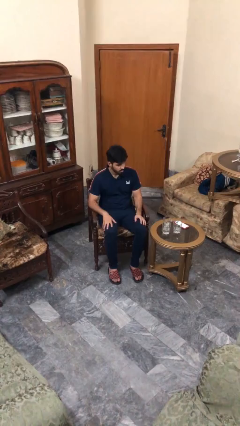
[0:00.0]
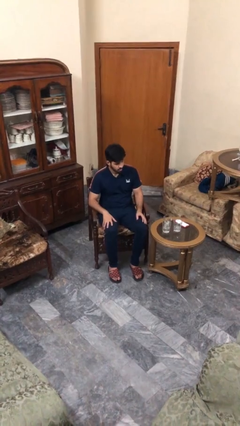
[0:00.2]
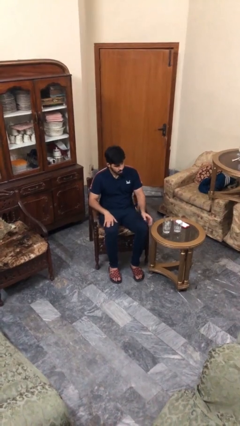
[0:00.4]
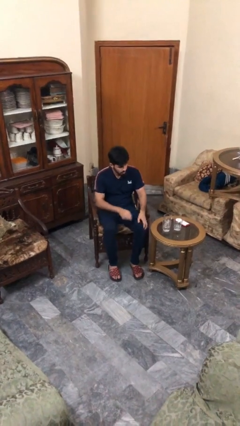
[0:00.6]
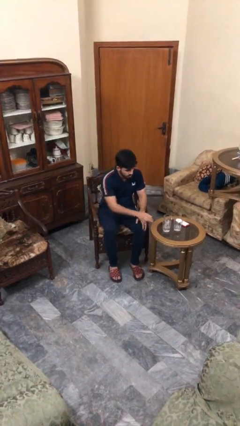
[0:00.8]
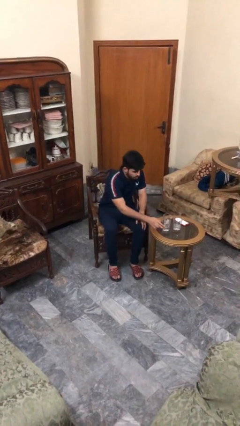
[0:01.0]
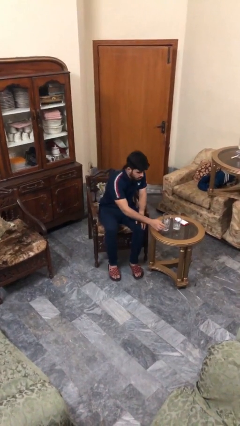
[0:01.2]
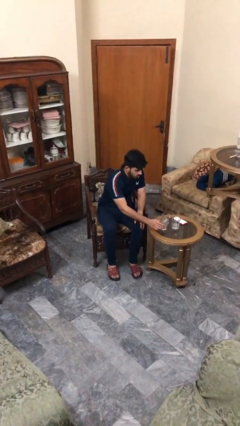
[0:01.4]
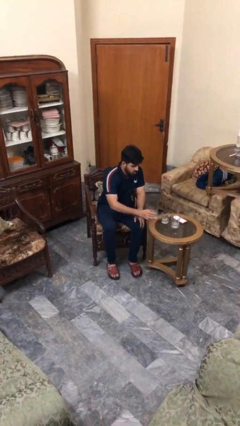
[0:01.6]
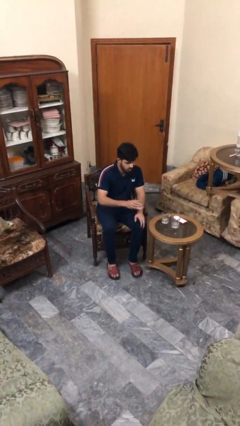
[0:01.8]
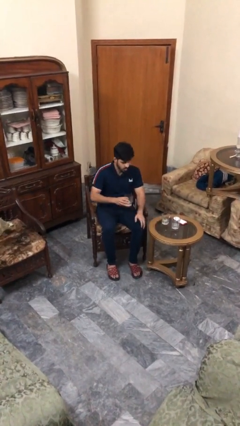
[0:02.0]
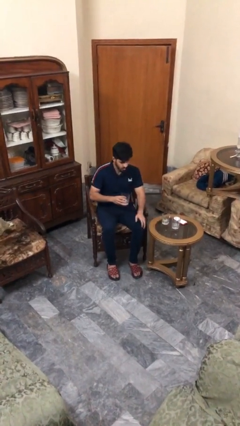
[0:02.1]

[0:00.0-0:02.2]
person picks up object from table

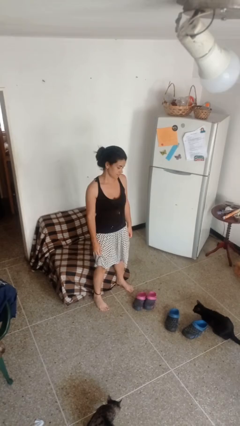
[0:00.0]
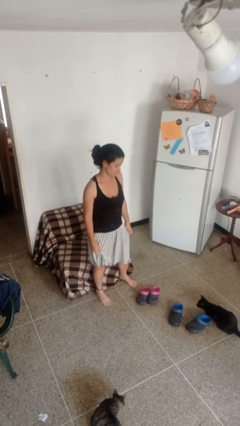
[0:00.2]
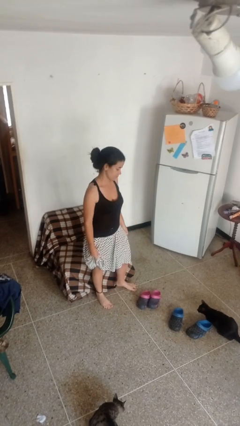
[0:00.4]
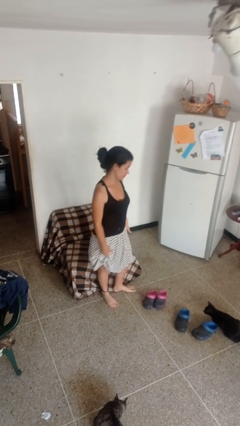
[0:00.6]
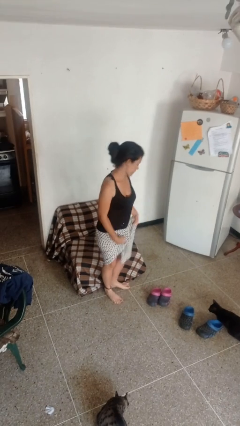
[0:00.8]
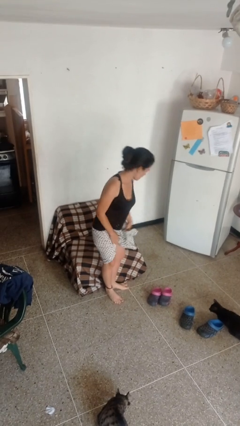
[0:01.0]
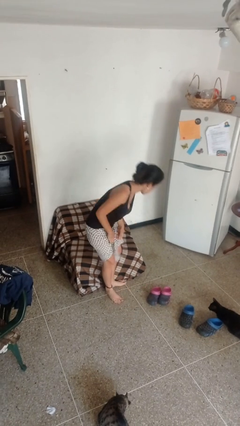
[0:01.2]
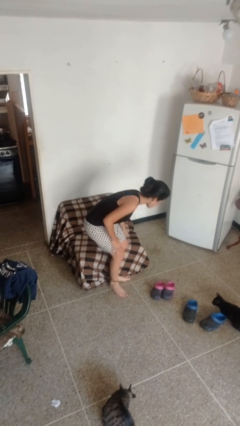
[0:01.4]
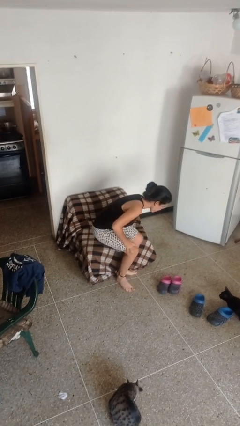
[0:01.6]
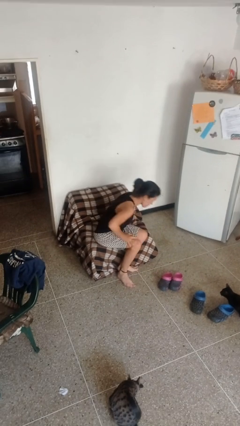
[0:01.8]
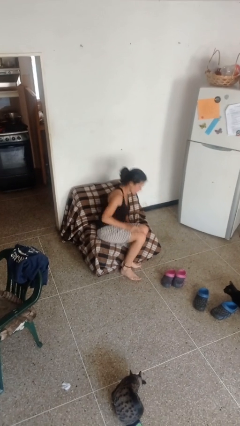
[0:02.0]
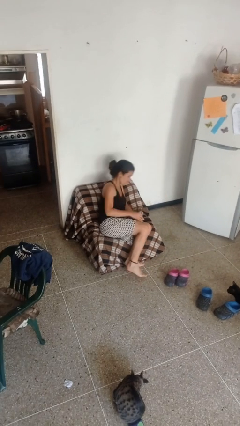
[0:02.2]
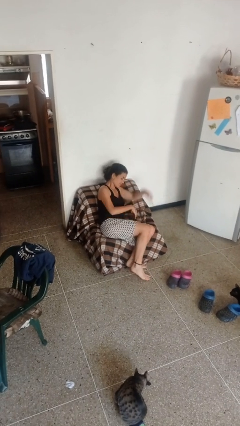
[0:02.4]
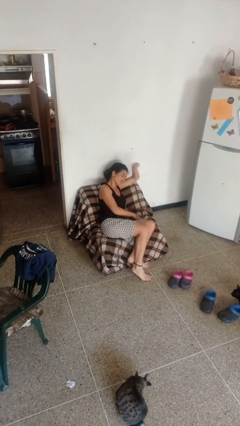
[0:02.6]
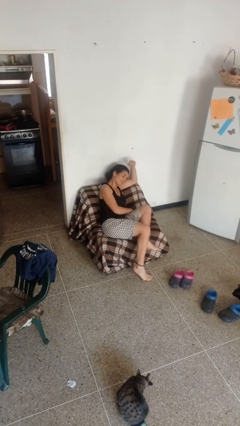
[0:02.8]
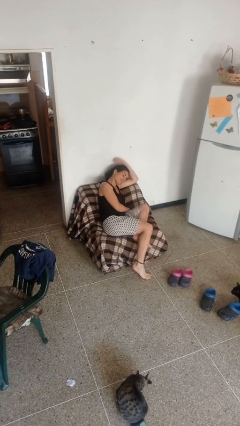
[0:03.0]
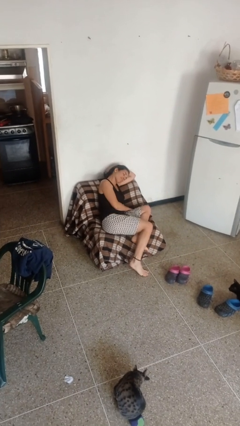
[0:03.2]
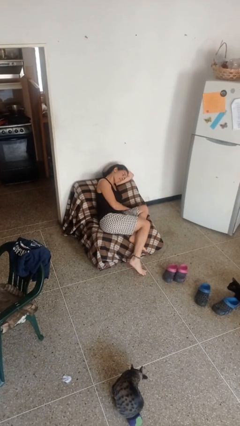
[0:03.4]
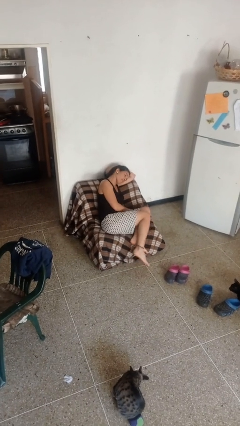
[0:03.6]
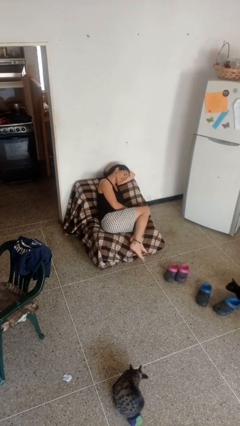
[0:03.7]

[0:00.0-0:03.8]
person lies down on couch

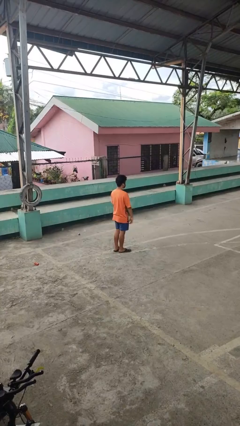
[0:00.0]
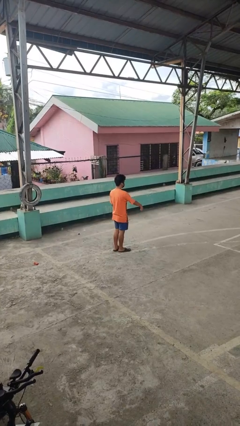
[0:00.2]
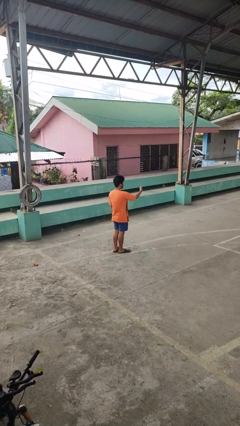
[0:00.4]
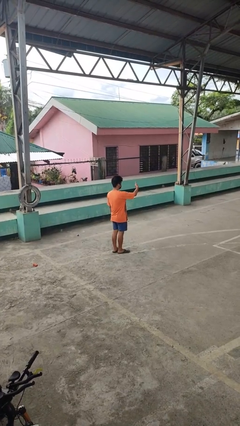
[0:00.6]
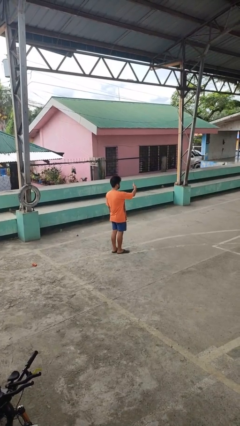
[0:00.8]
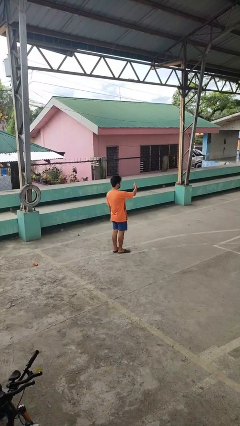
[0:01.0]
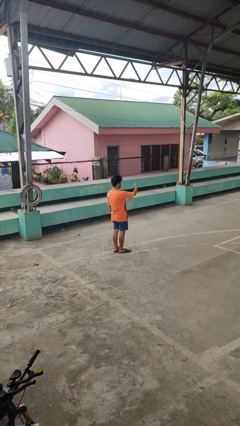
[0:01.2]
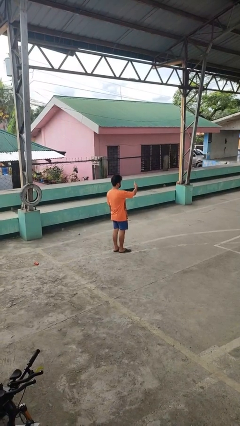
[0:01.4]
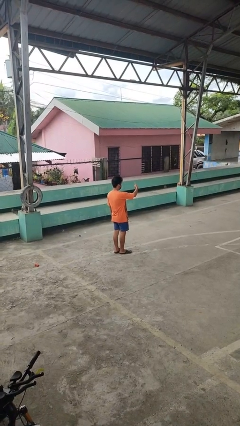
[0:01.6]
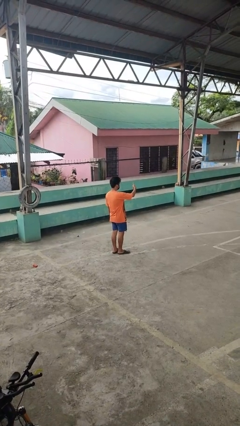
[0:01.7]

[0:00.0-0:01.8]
person gestures thumbs up

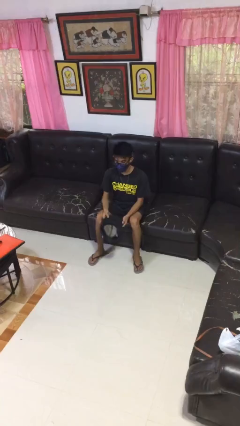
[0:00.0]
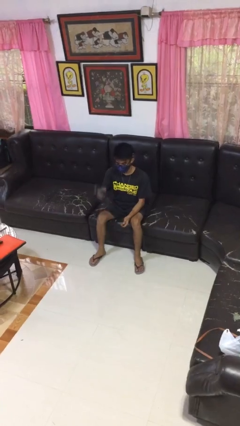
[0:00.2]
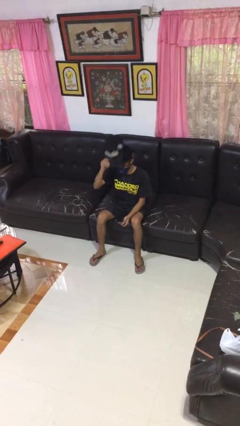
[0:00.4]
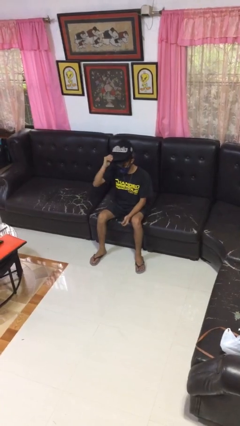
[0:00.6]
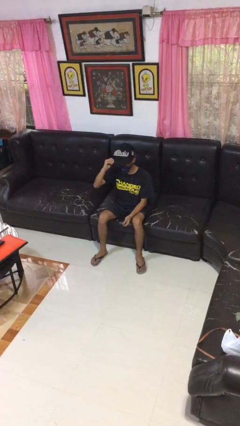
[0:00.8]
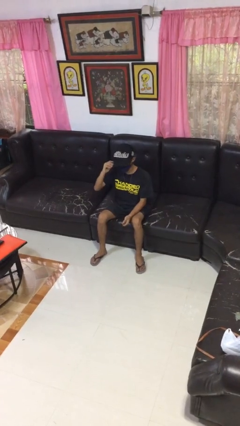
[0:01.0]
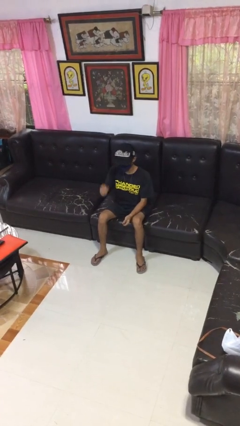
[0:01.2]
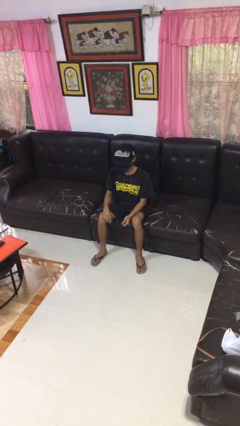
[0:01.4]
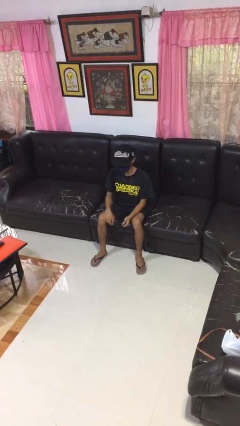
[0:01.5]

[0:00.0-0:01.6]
person puts on hat

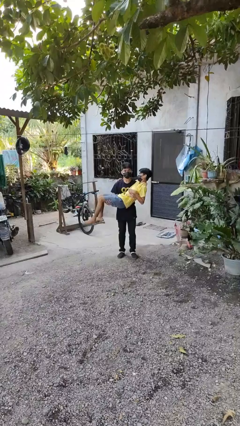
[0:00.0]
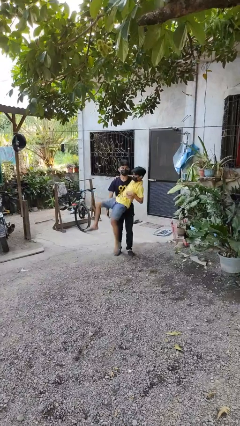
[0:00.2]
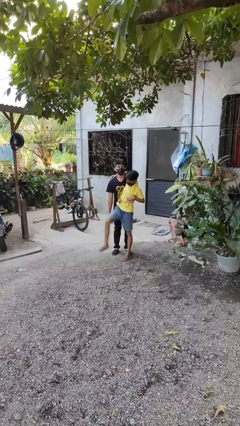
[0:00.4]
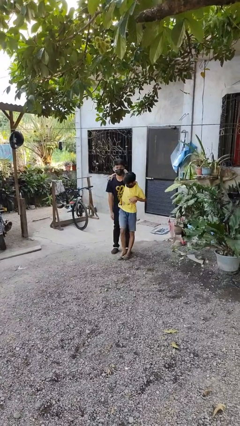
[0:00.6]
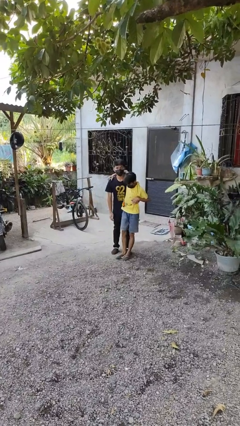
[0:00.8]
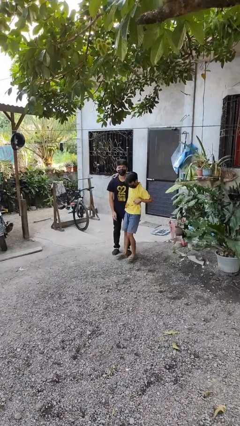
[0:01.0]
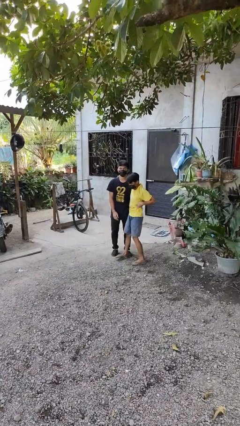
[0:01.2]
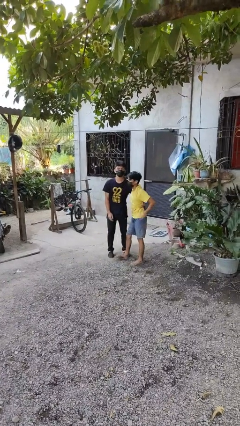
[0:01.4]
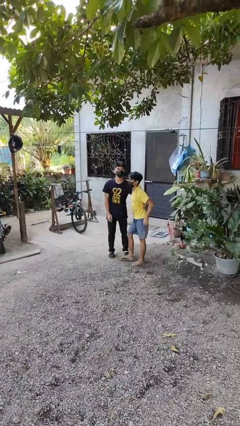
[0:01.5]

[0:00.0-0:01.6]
person puts down person

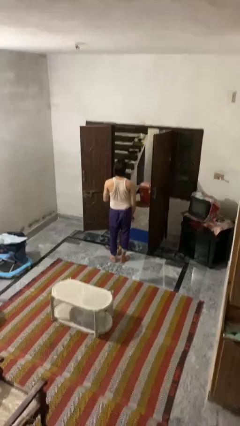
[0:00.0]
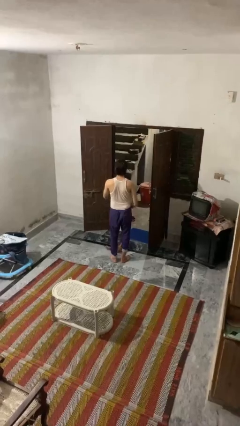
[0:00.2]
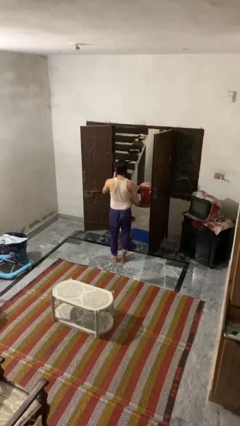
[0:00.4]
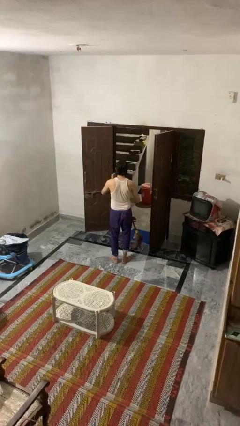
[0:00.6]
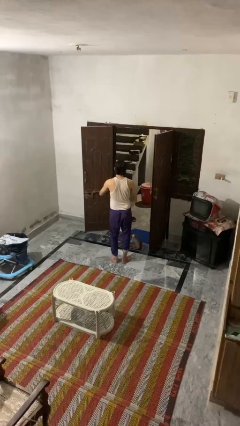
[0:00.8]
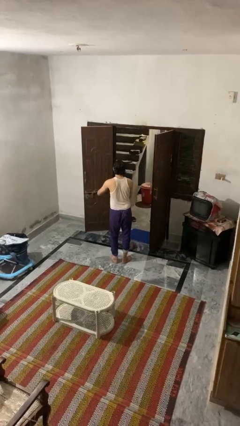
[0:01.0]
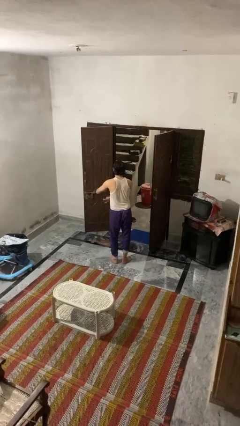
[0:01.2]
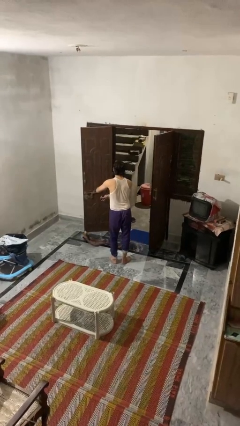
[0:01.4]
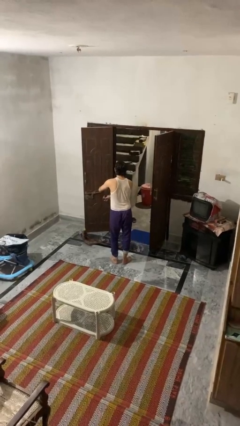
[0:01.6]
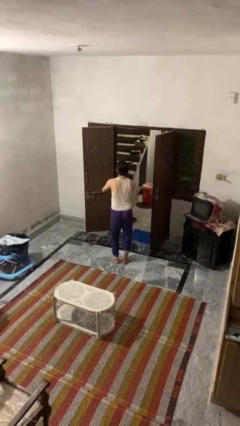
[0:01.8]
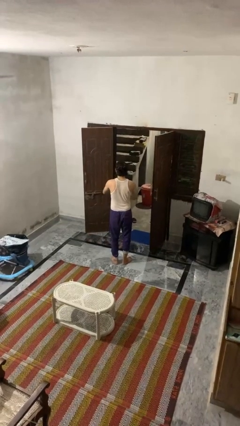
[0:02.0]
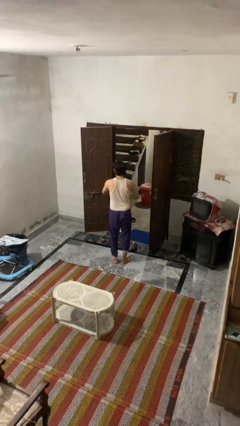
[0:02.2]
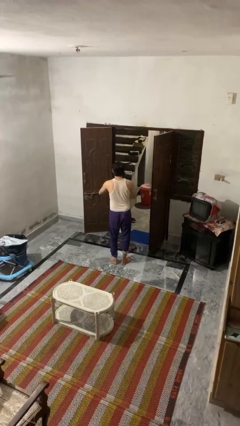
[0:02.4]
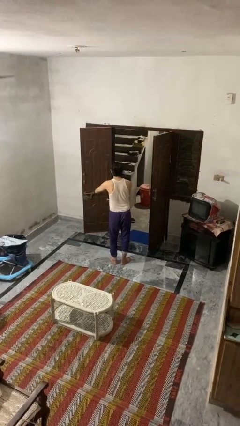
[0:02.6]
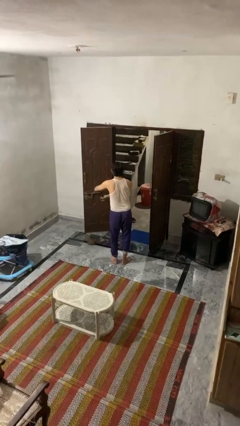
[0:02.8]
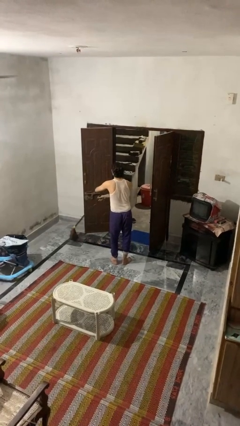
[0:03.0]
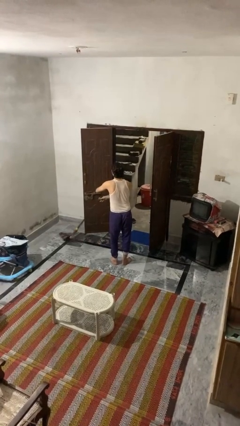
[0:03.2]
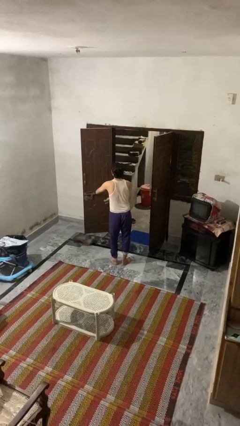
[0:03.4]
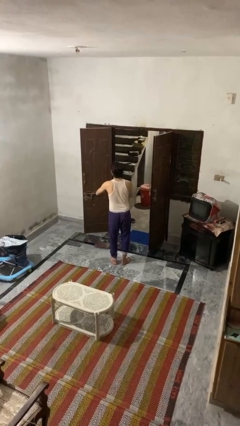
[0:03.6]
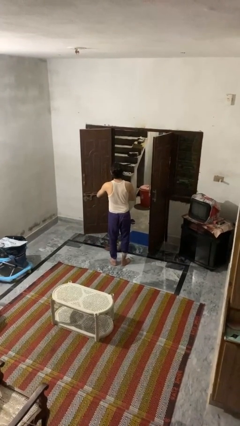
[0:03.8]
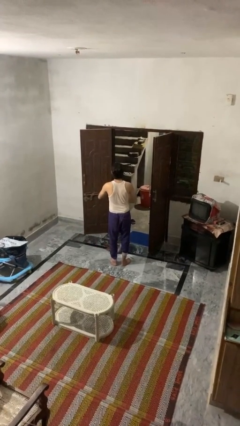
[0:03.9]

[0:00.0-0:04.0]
person mops

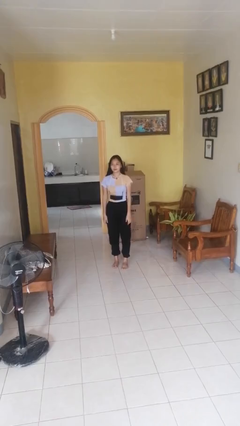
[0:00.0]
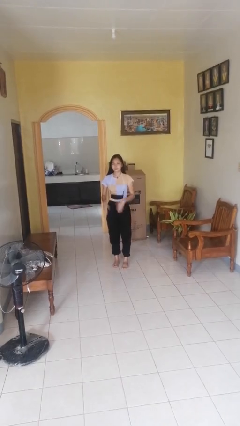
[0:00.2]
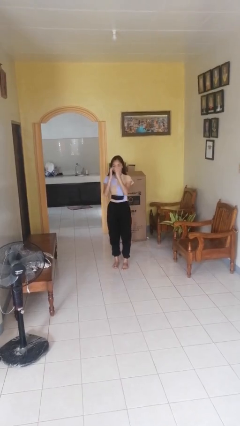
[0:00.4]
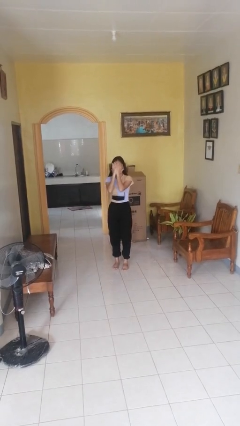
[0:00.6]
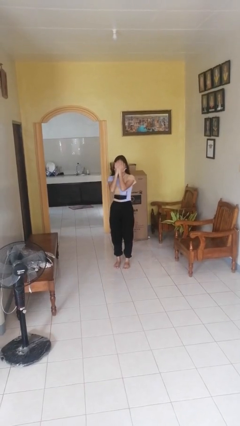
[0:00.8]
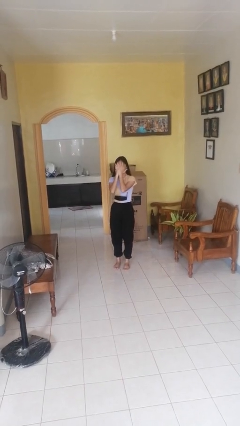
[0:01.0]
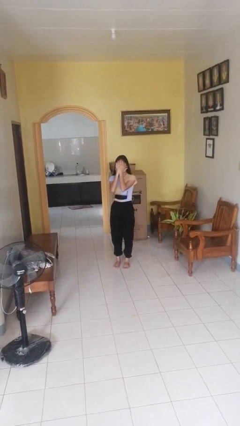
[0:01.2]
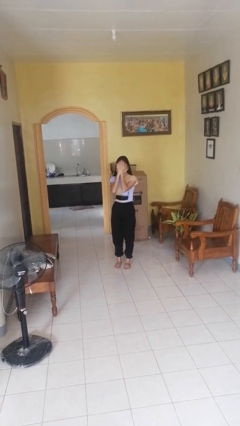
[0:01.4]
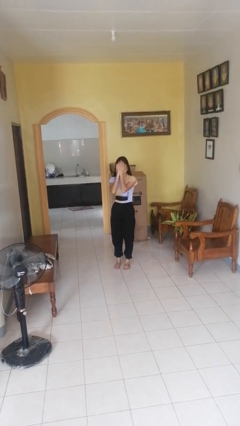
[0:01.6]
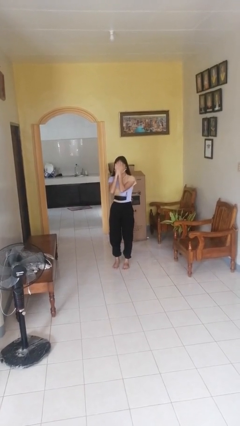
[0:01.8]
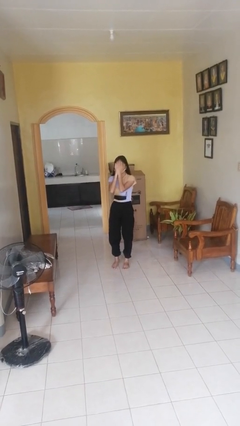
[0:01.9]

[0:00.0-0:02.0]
person covers face with hands
